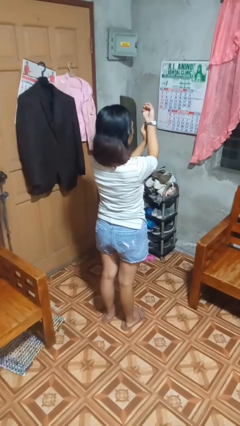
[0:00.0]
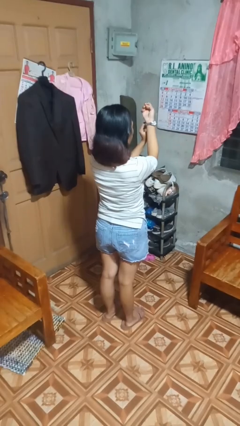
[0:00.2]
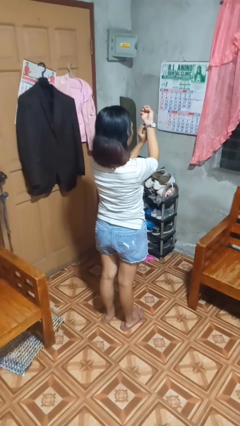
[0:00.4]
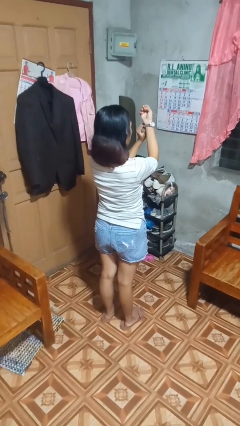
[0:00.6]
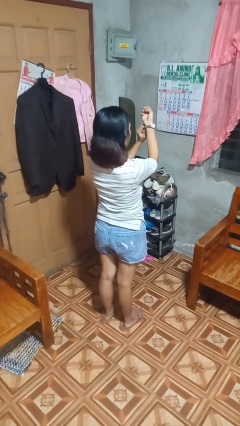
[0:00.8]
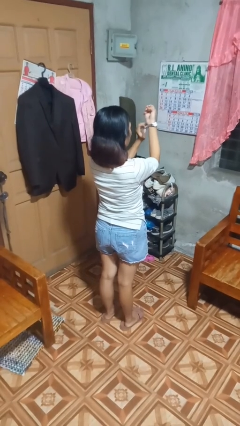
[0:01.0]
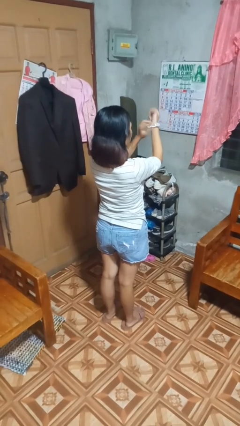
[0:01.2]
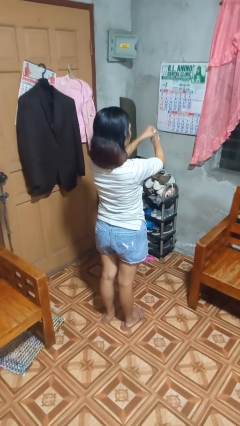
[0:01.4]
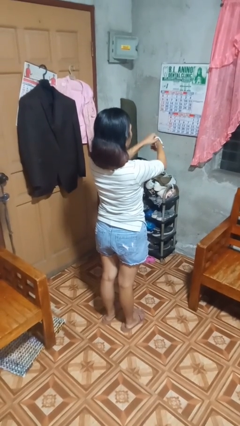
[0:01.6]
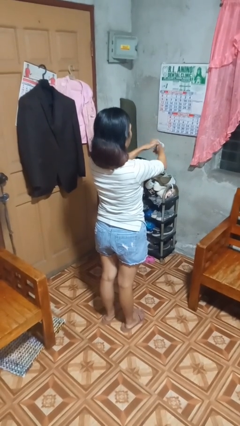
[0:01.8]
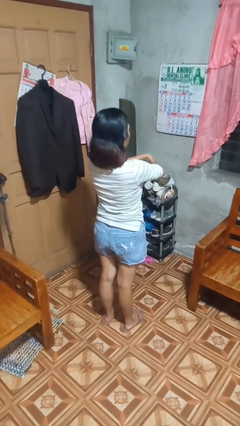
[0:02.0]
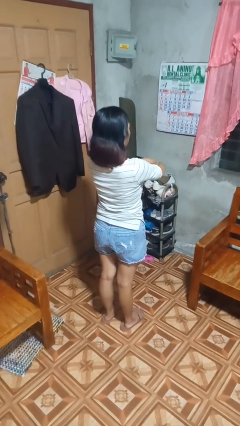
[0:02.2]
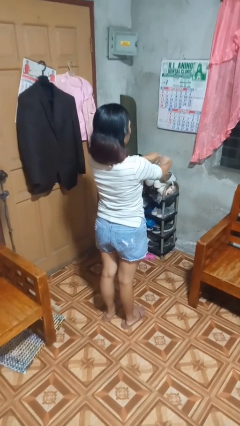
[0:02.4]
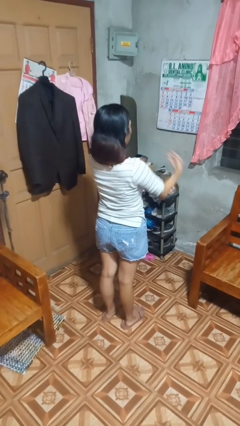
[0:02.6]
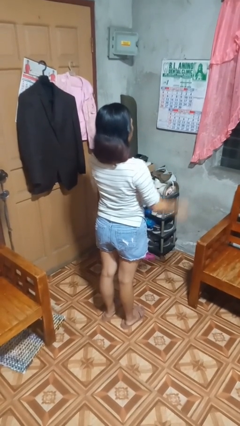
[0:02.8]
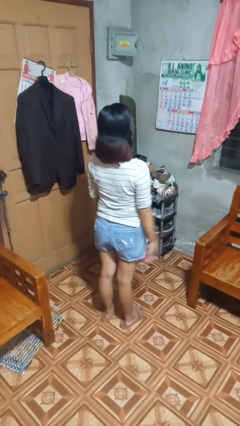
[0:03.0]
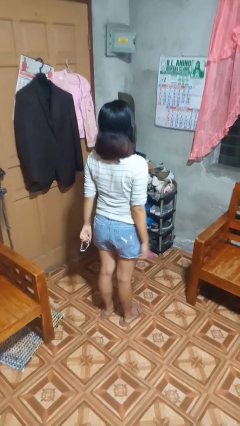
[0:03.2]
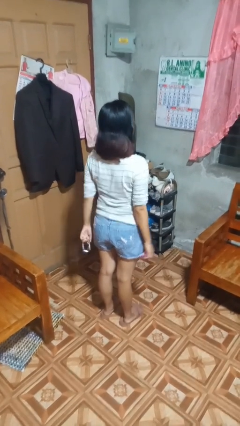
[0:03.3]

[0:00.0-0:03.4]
person takes off wristwatch

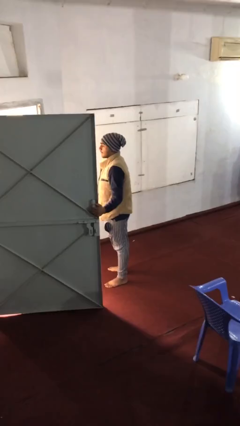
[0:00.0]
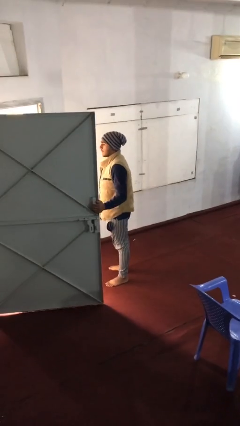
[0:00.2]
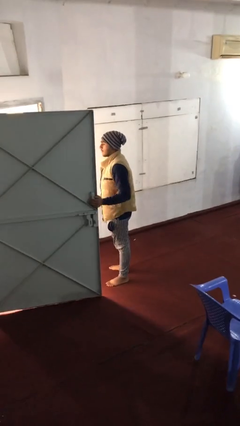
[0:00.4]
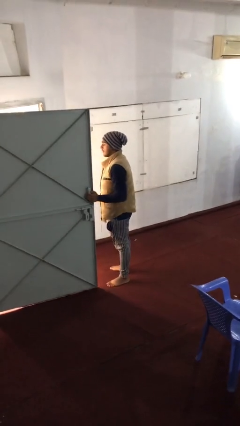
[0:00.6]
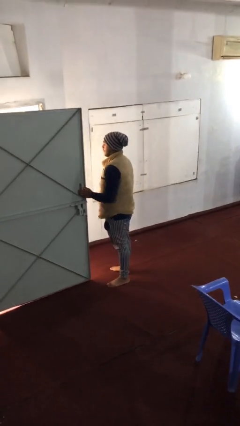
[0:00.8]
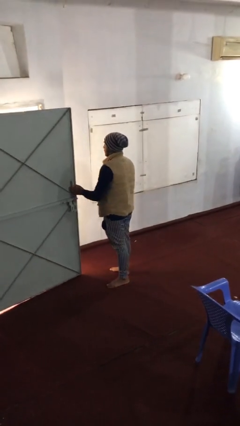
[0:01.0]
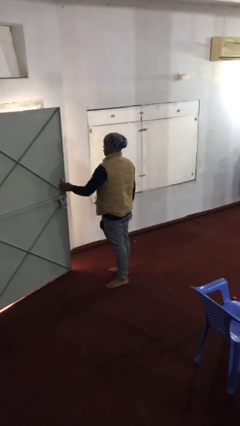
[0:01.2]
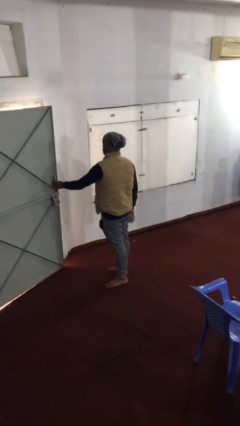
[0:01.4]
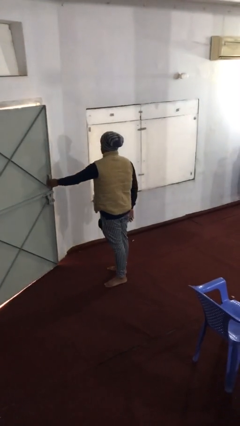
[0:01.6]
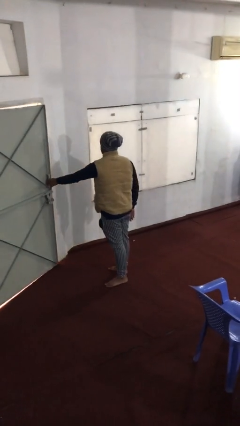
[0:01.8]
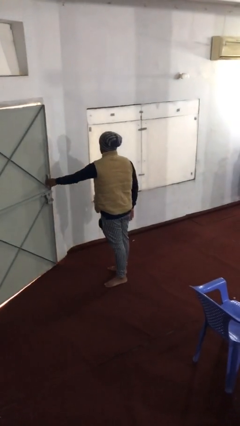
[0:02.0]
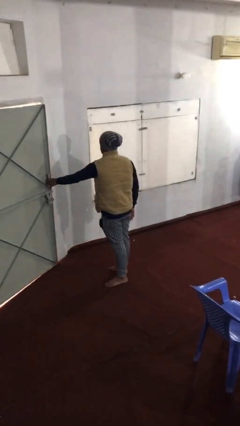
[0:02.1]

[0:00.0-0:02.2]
person closes facility door

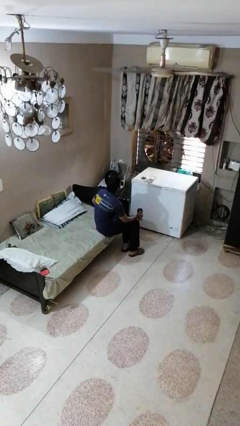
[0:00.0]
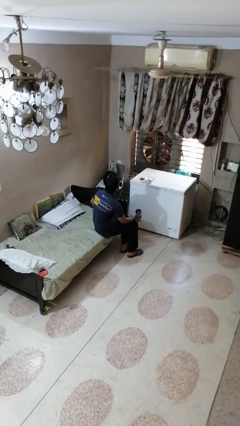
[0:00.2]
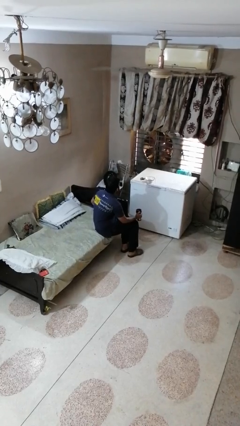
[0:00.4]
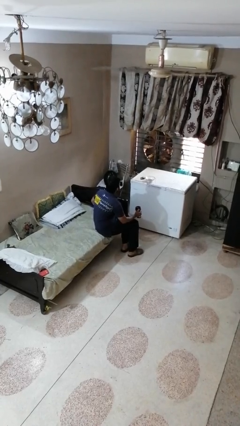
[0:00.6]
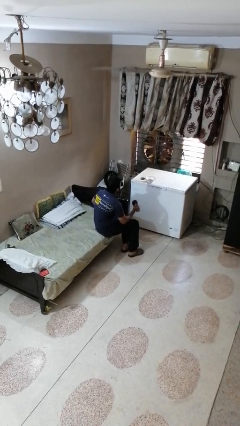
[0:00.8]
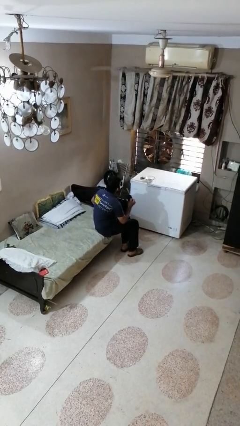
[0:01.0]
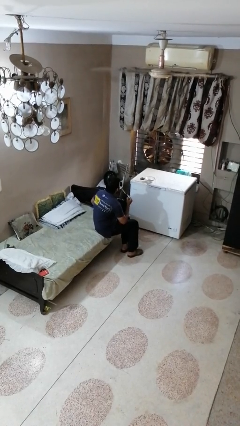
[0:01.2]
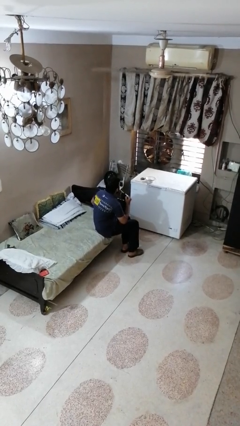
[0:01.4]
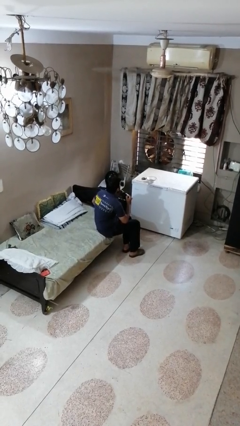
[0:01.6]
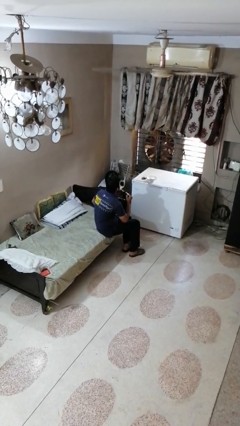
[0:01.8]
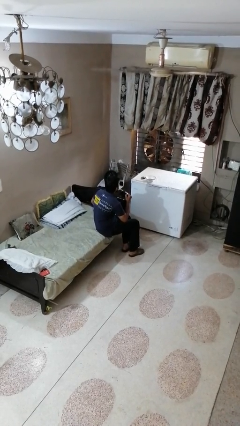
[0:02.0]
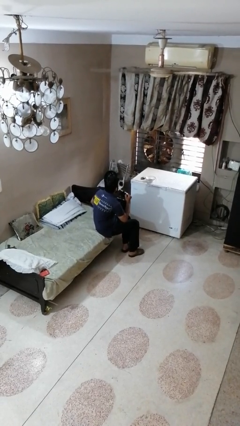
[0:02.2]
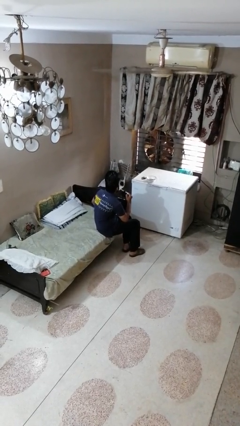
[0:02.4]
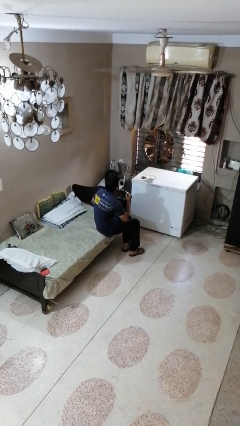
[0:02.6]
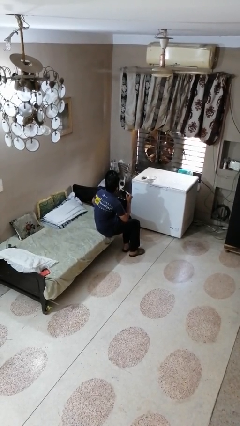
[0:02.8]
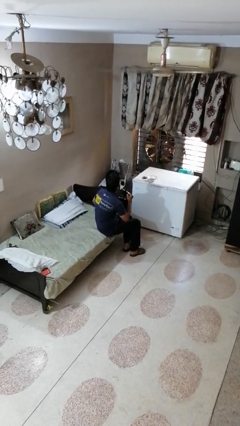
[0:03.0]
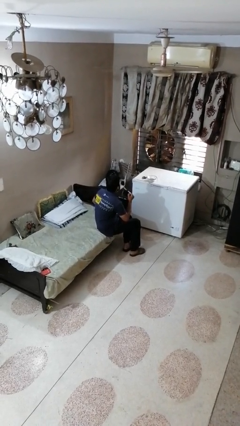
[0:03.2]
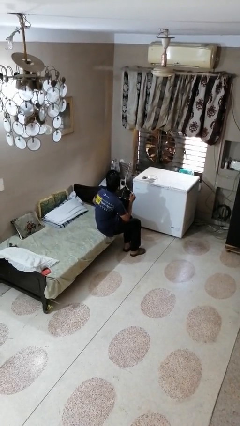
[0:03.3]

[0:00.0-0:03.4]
person drinks from straw

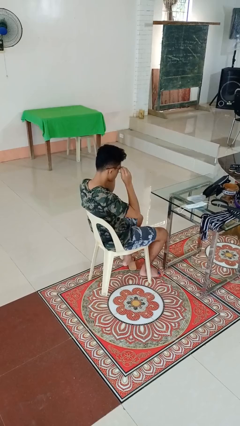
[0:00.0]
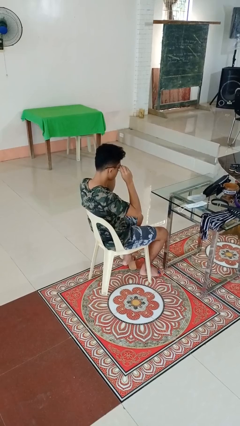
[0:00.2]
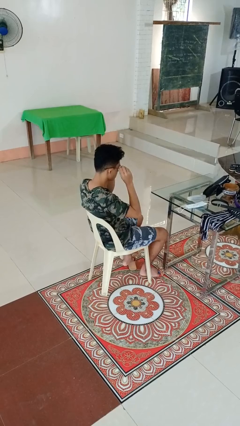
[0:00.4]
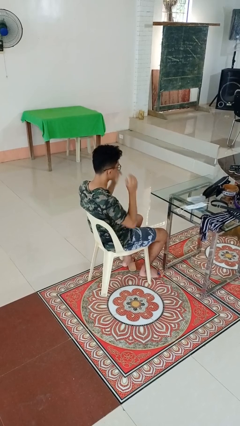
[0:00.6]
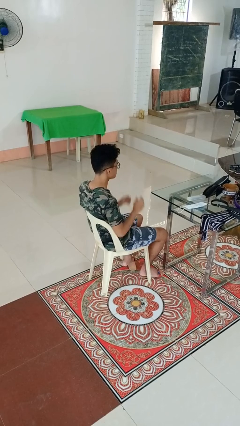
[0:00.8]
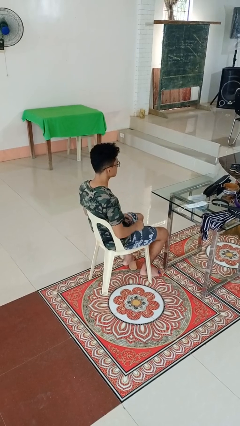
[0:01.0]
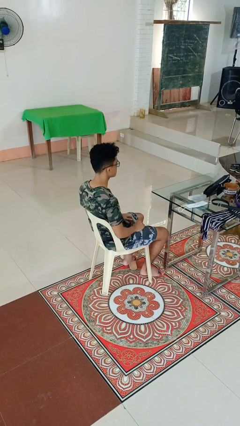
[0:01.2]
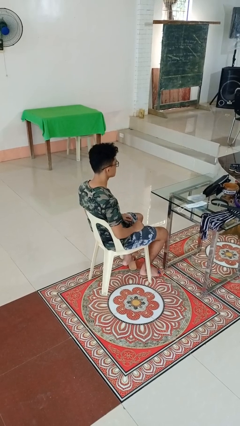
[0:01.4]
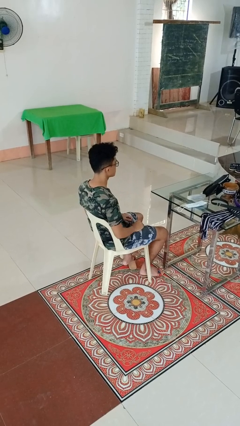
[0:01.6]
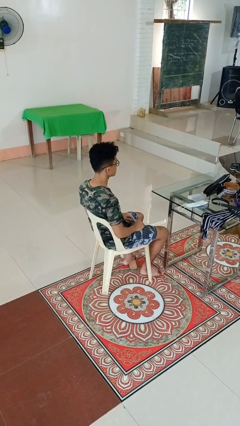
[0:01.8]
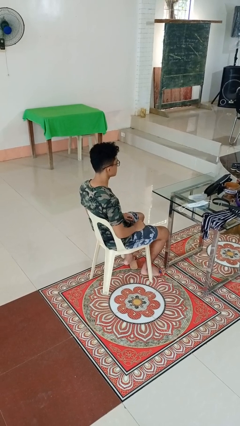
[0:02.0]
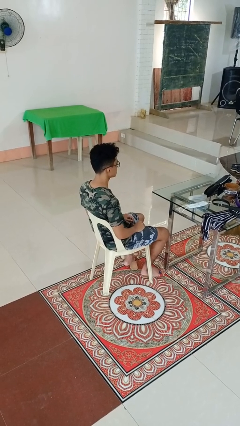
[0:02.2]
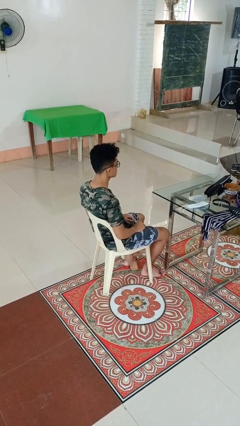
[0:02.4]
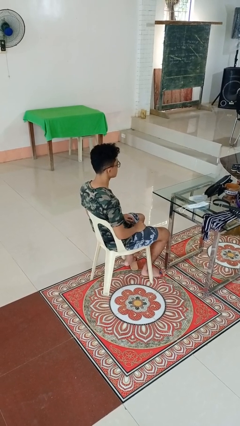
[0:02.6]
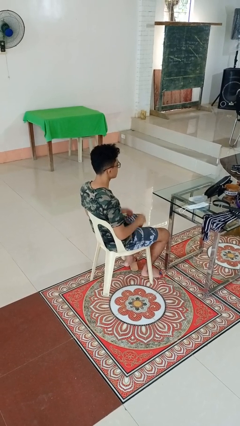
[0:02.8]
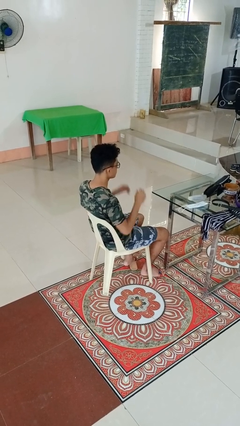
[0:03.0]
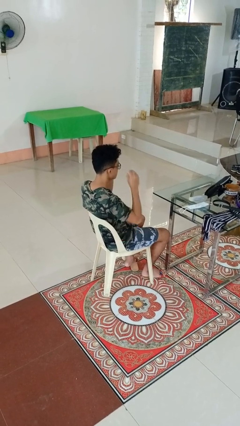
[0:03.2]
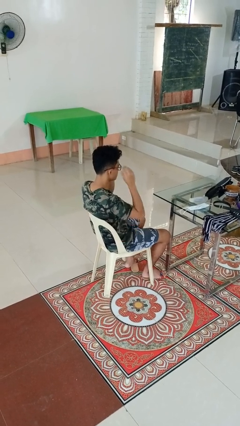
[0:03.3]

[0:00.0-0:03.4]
person puts on glasses

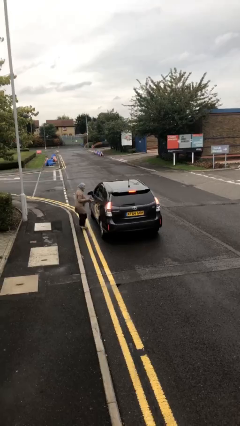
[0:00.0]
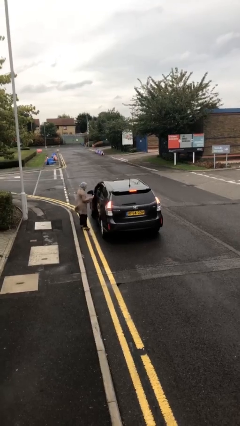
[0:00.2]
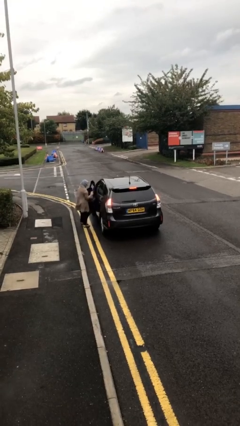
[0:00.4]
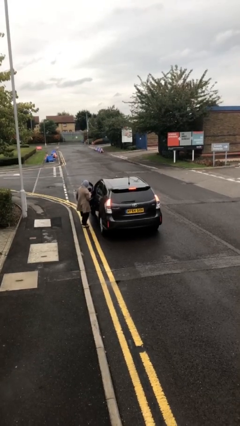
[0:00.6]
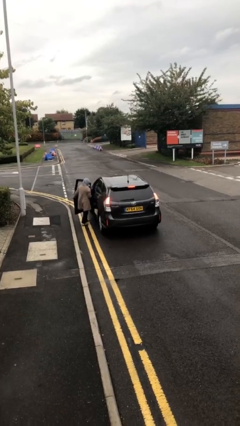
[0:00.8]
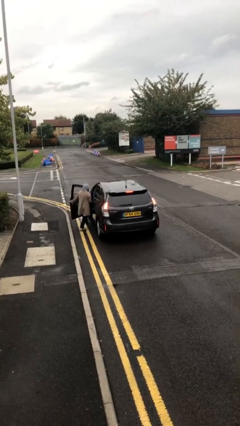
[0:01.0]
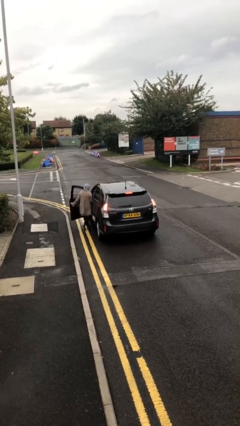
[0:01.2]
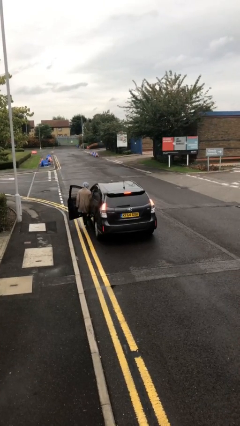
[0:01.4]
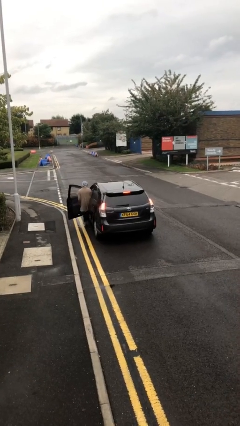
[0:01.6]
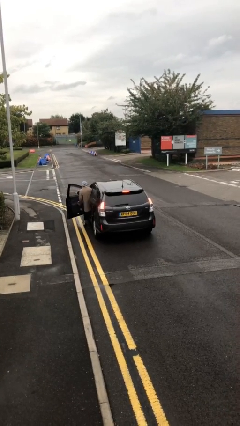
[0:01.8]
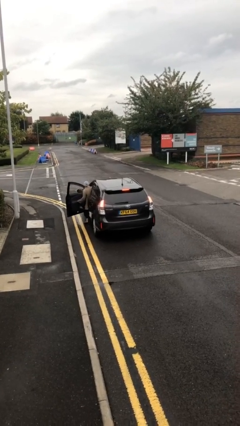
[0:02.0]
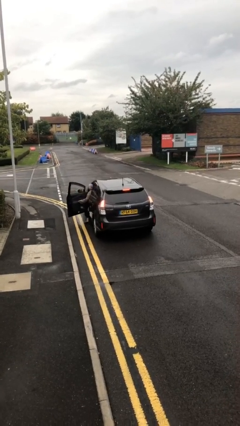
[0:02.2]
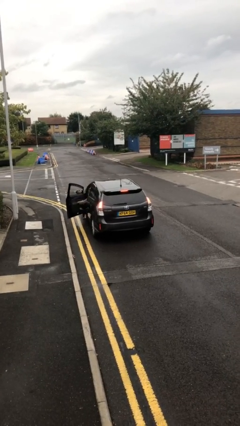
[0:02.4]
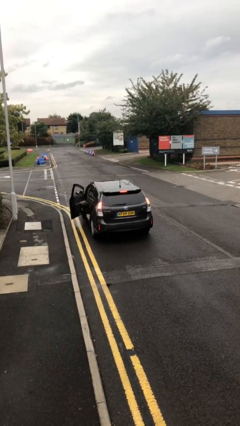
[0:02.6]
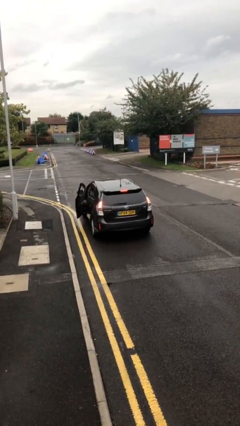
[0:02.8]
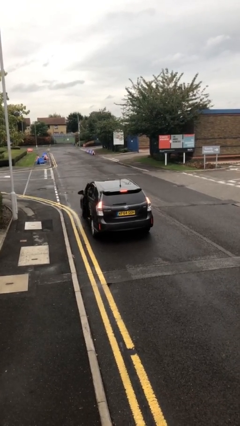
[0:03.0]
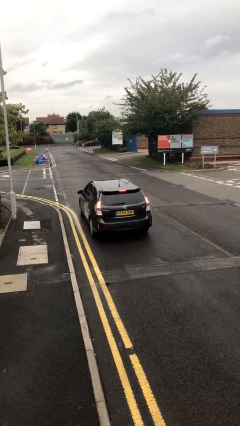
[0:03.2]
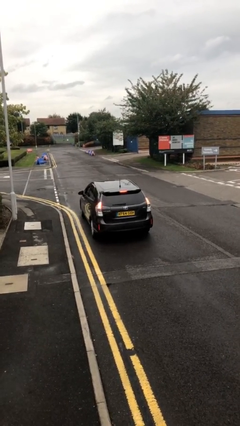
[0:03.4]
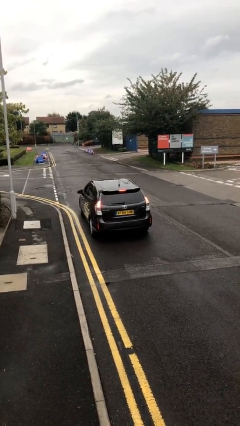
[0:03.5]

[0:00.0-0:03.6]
car picks up person

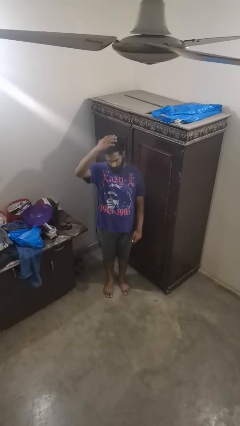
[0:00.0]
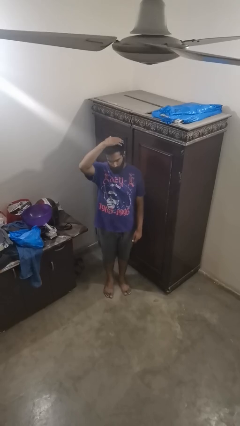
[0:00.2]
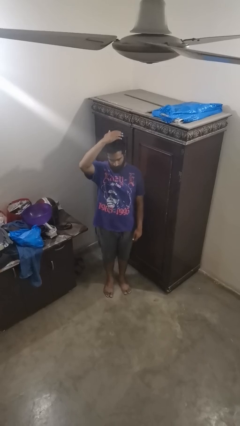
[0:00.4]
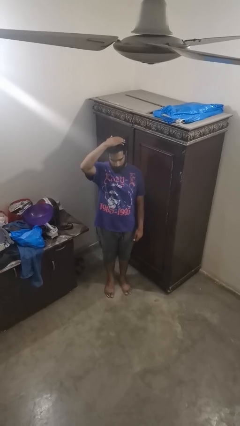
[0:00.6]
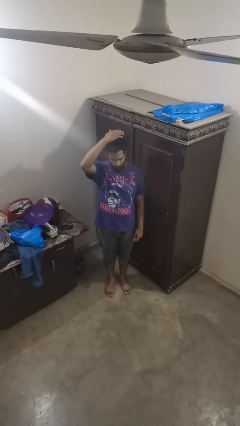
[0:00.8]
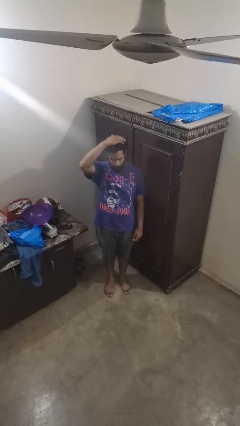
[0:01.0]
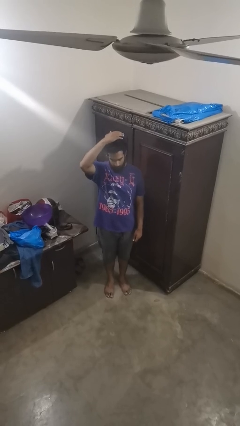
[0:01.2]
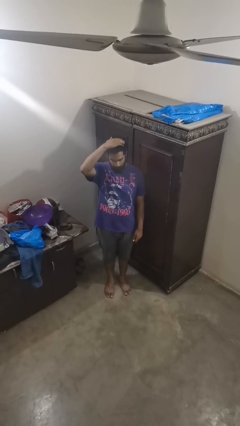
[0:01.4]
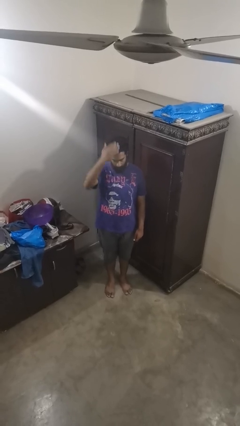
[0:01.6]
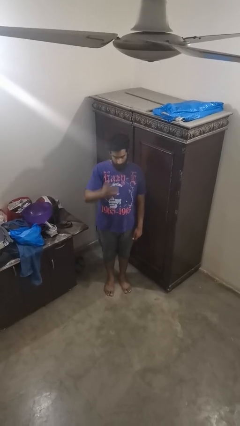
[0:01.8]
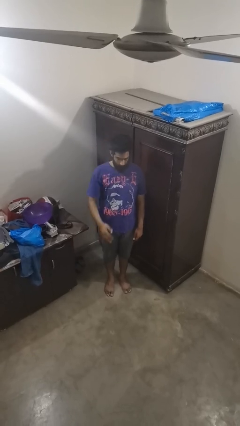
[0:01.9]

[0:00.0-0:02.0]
person pats head
